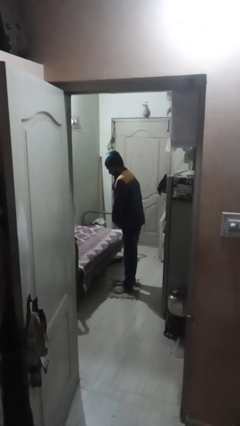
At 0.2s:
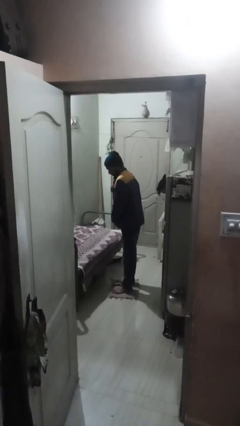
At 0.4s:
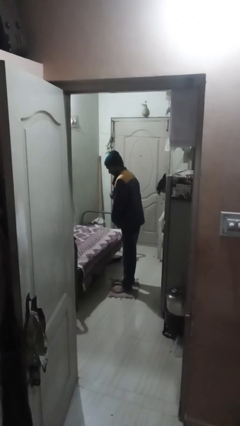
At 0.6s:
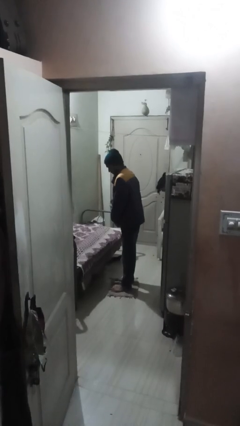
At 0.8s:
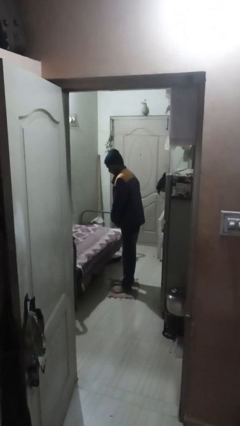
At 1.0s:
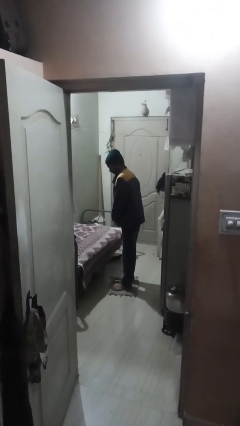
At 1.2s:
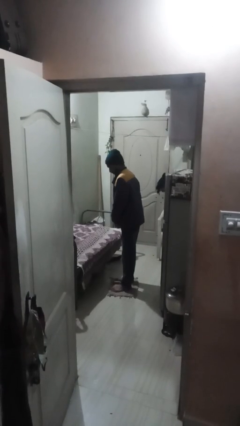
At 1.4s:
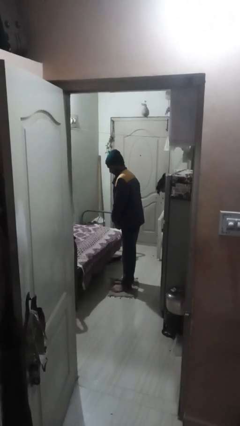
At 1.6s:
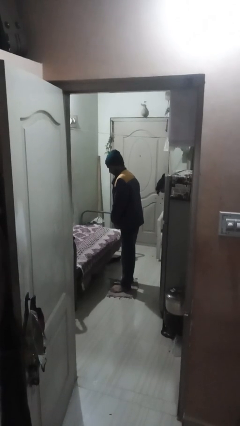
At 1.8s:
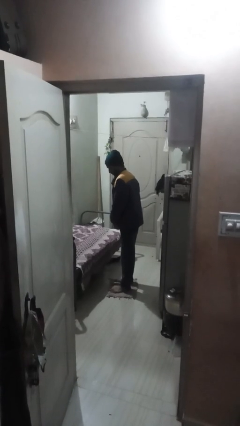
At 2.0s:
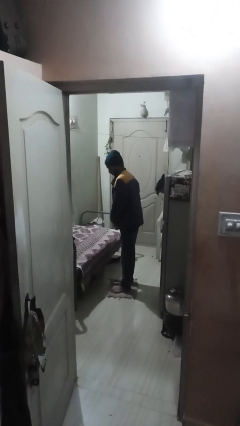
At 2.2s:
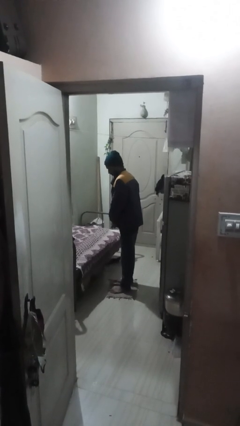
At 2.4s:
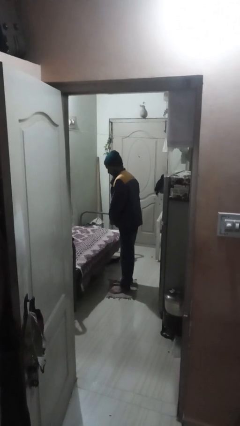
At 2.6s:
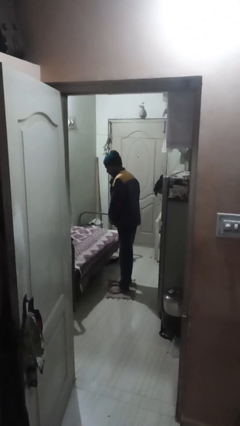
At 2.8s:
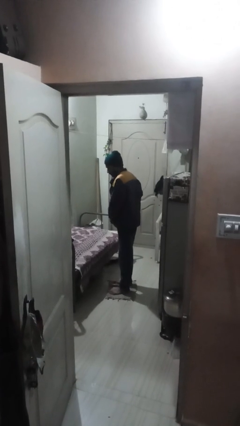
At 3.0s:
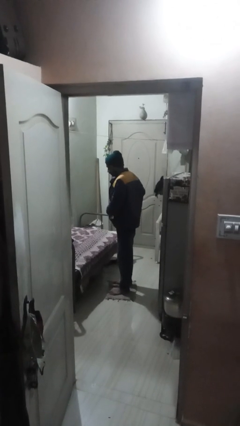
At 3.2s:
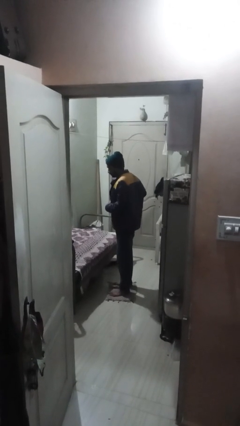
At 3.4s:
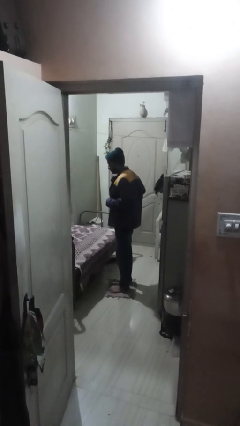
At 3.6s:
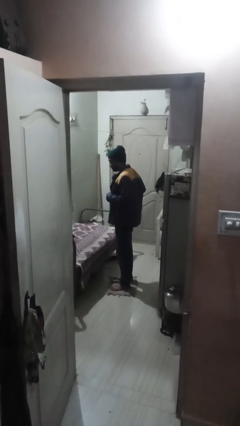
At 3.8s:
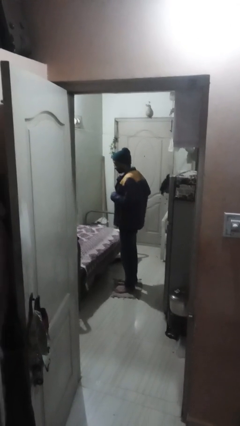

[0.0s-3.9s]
person unzips jacket

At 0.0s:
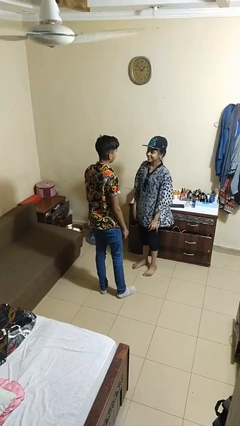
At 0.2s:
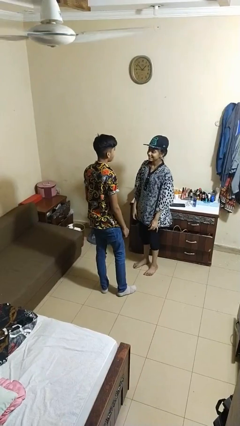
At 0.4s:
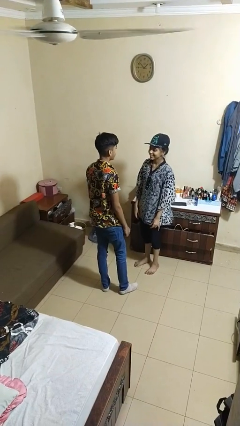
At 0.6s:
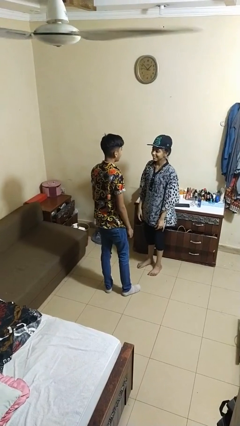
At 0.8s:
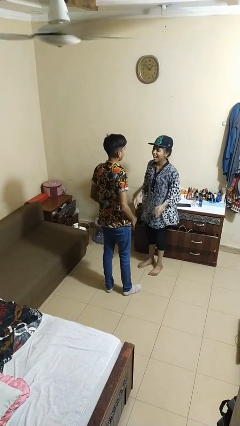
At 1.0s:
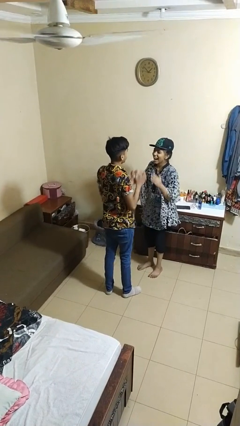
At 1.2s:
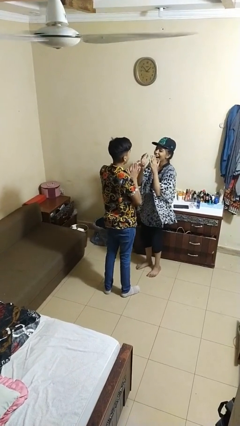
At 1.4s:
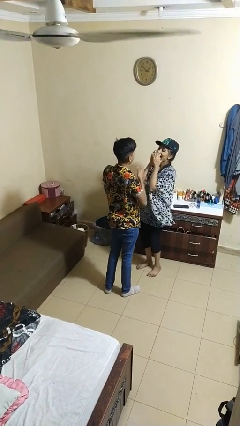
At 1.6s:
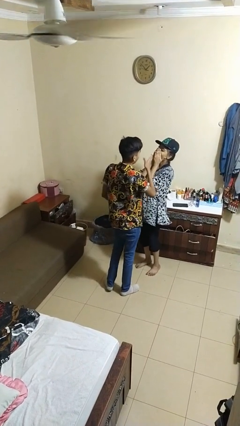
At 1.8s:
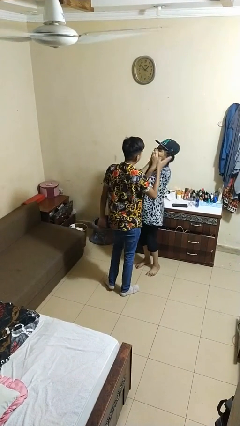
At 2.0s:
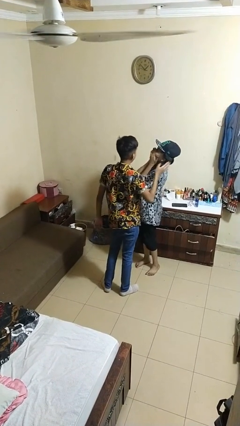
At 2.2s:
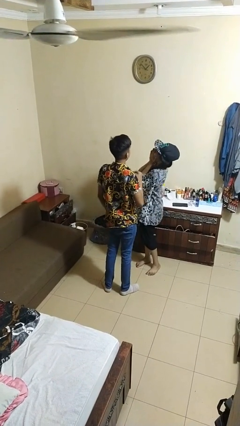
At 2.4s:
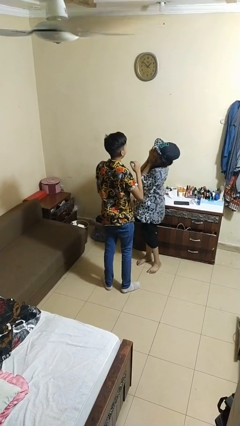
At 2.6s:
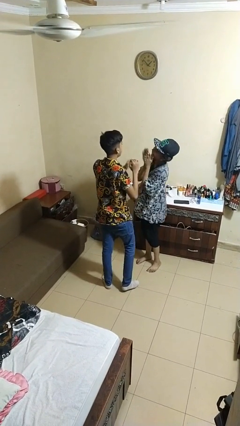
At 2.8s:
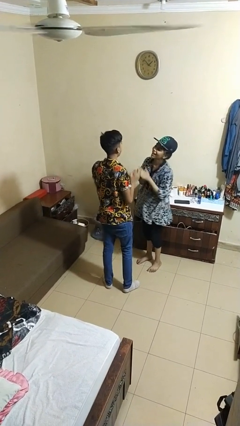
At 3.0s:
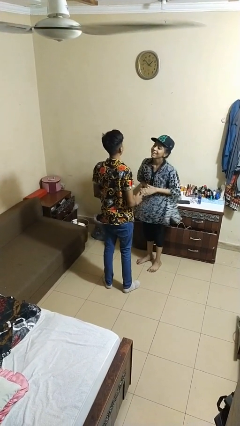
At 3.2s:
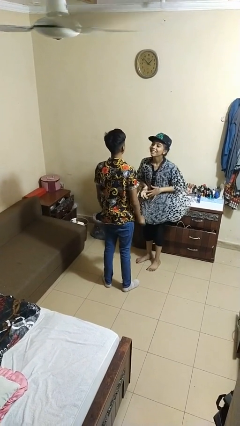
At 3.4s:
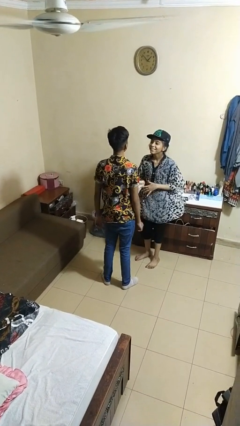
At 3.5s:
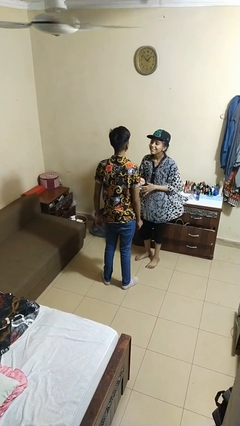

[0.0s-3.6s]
person laughs with person

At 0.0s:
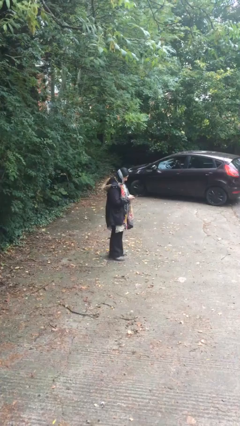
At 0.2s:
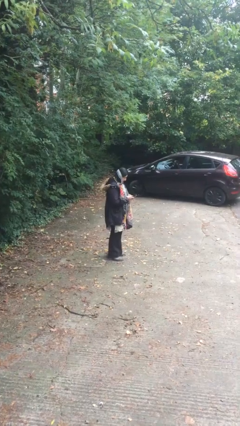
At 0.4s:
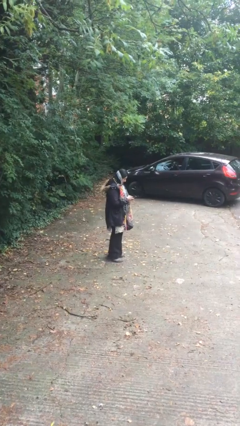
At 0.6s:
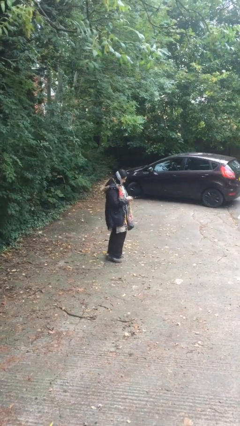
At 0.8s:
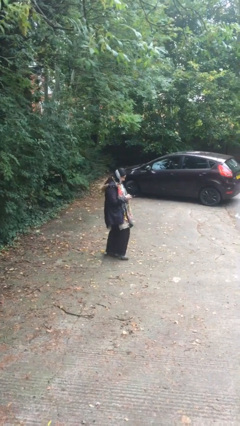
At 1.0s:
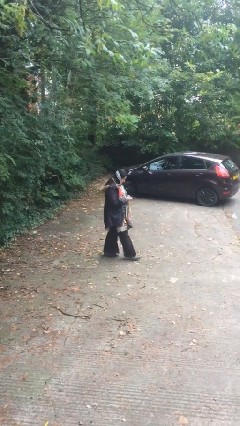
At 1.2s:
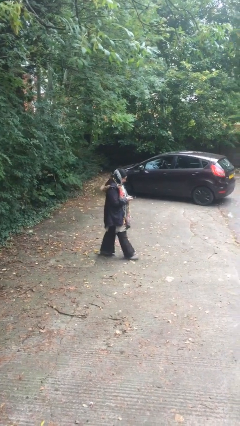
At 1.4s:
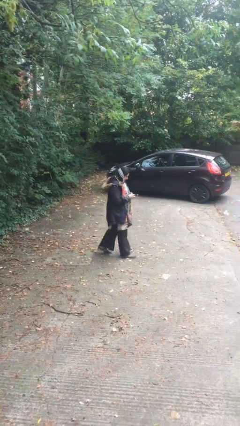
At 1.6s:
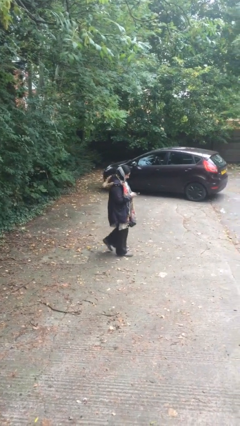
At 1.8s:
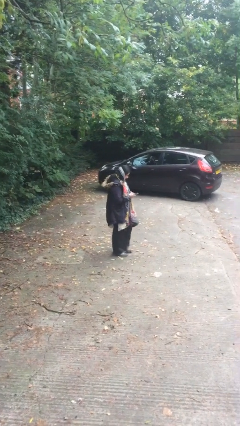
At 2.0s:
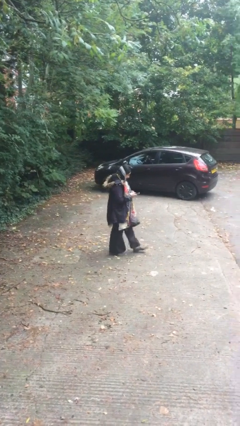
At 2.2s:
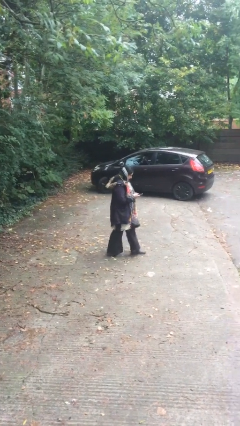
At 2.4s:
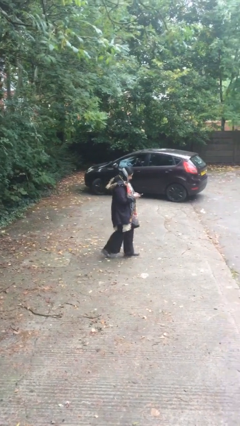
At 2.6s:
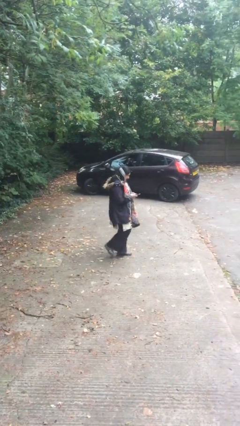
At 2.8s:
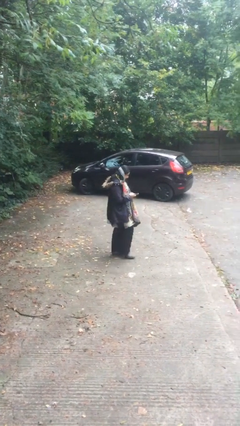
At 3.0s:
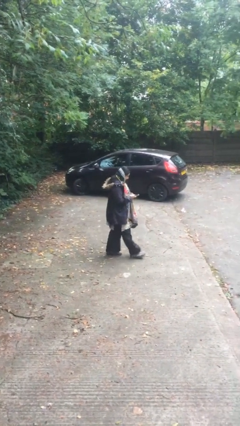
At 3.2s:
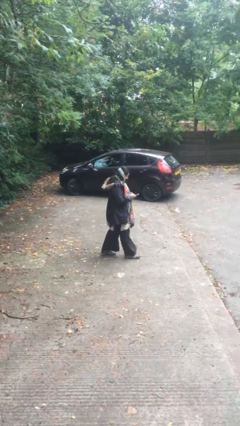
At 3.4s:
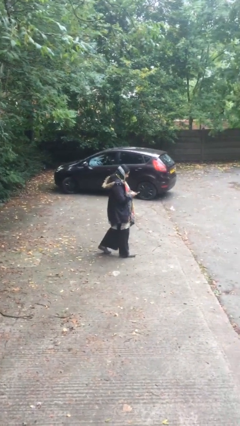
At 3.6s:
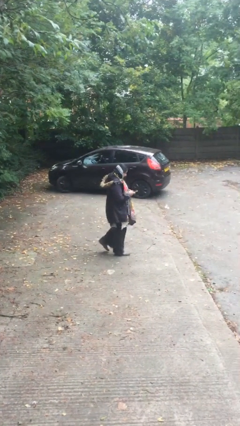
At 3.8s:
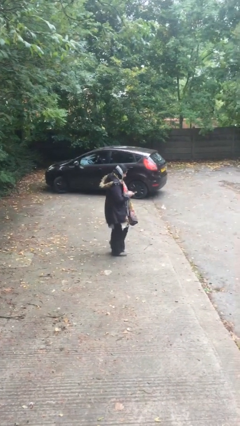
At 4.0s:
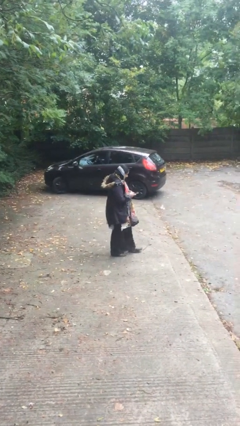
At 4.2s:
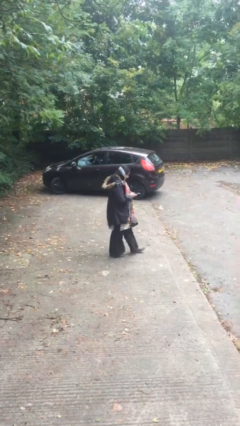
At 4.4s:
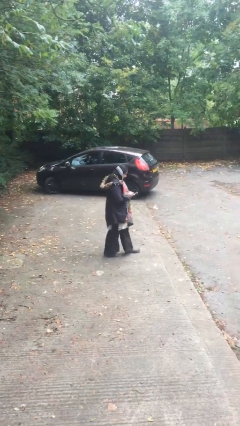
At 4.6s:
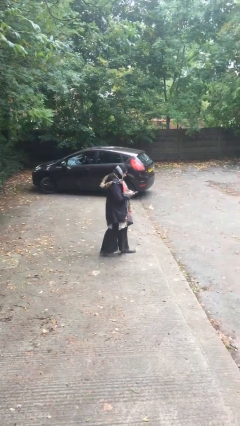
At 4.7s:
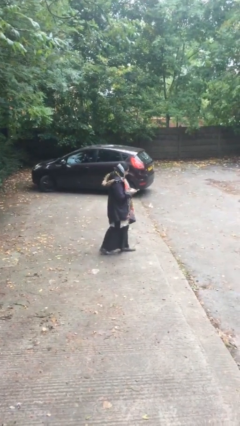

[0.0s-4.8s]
person texts on phone

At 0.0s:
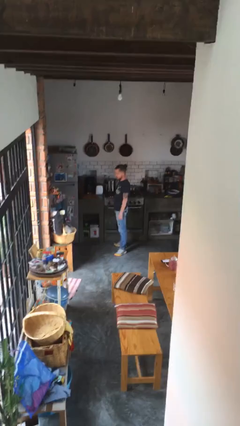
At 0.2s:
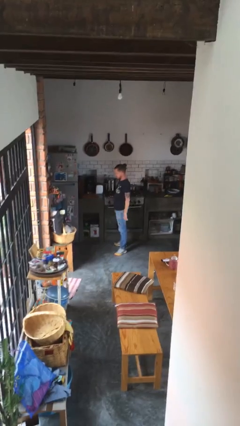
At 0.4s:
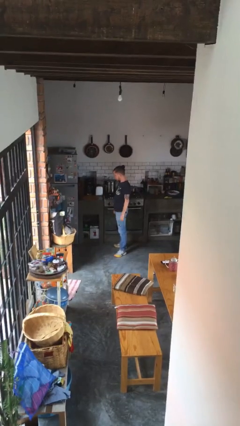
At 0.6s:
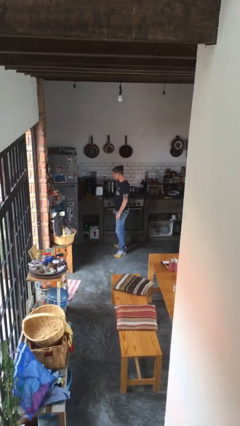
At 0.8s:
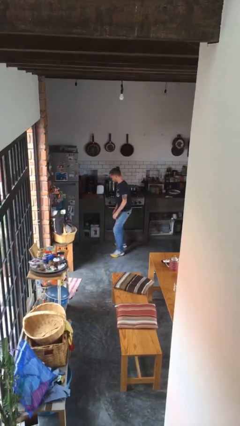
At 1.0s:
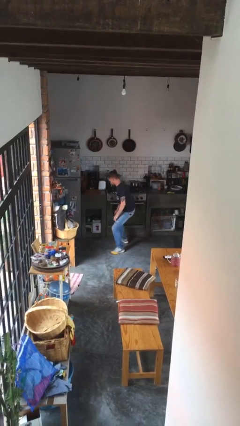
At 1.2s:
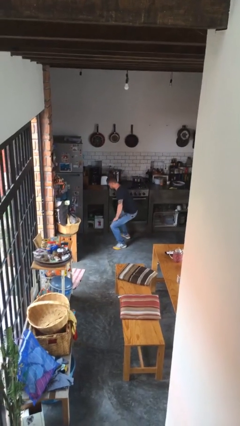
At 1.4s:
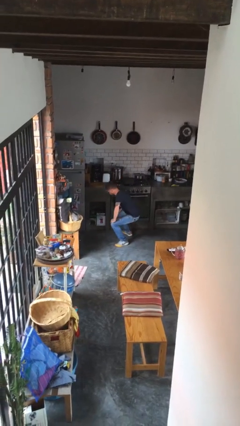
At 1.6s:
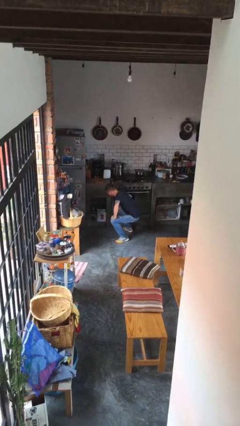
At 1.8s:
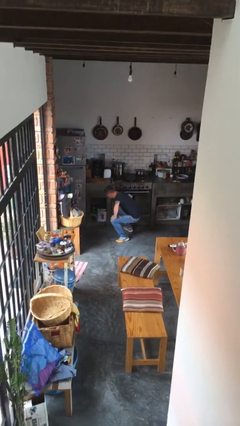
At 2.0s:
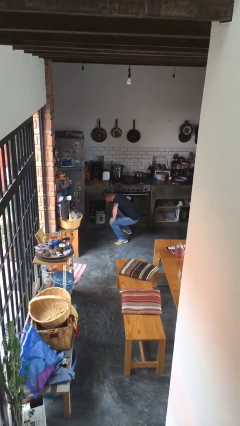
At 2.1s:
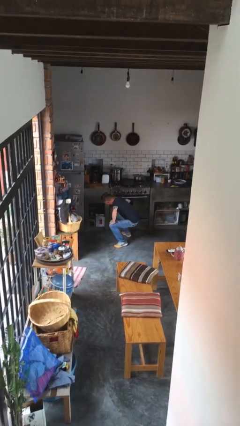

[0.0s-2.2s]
person squats

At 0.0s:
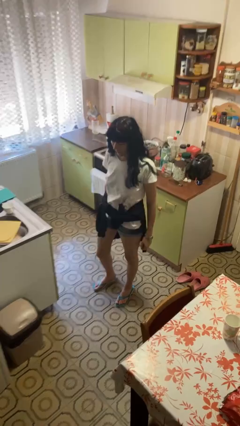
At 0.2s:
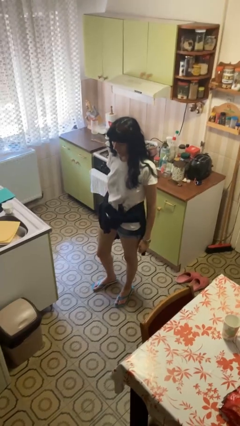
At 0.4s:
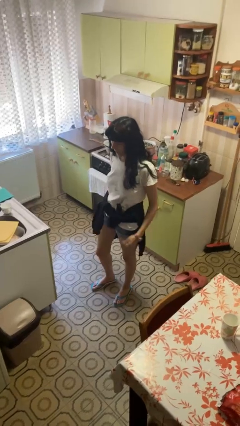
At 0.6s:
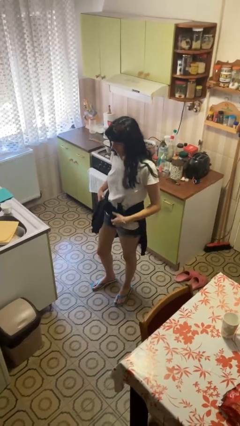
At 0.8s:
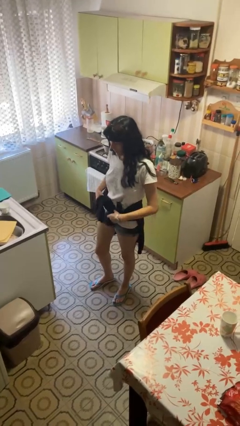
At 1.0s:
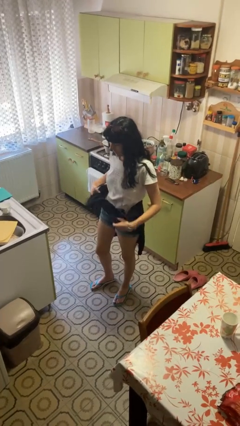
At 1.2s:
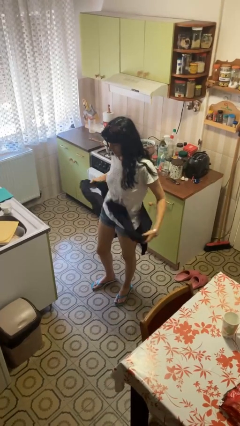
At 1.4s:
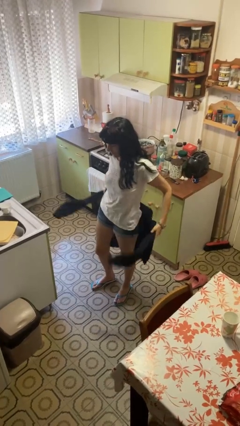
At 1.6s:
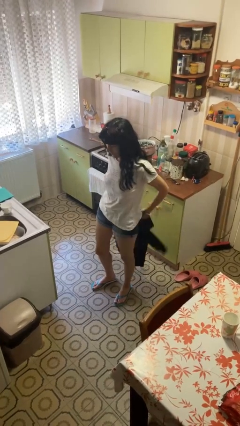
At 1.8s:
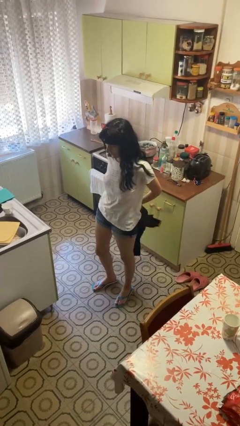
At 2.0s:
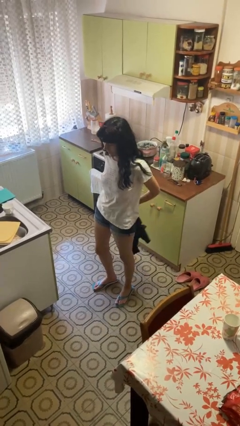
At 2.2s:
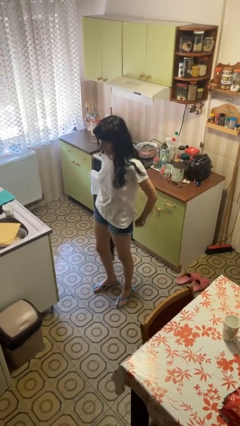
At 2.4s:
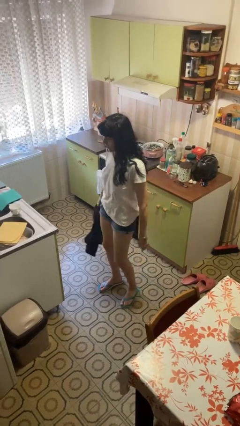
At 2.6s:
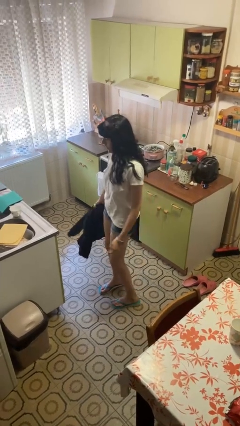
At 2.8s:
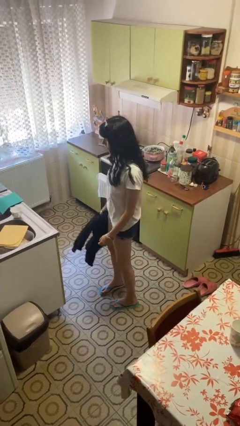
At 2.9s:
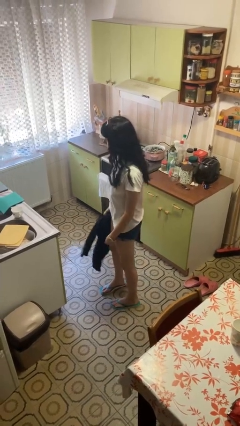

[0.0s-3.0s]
person unties jacket around waist
